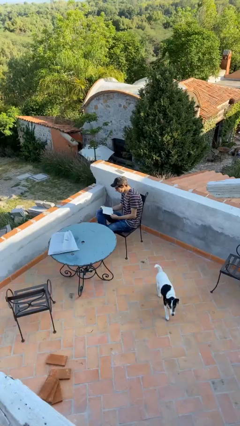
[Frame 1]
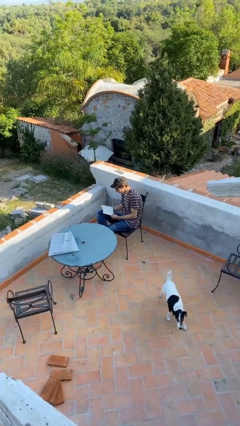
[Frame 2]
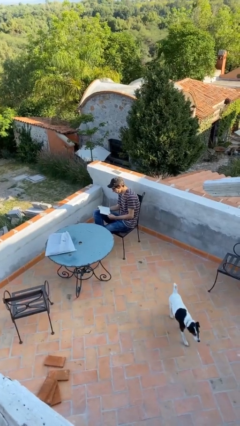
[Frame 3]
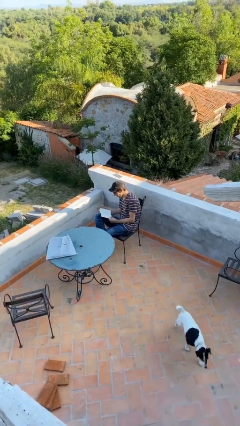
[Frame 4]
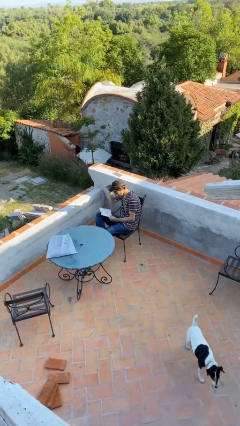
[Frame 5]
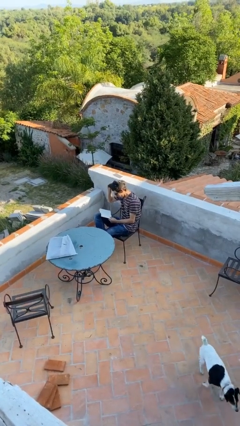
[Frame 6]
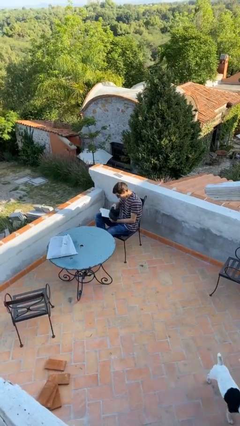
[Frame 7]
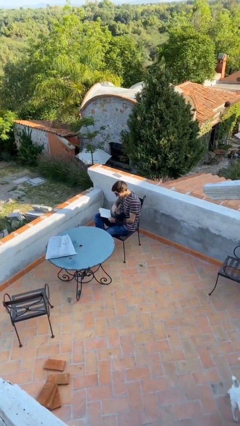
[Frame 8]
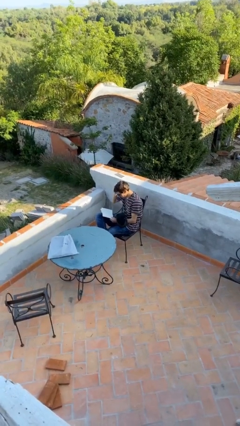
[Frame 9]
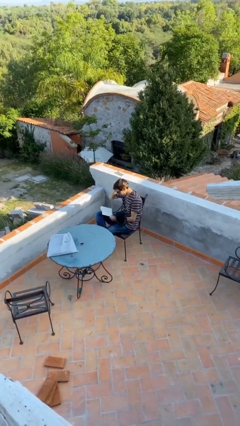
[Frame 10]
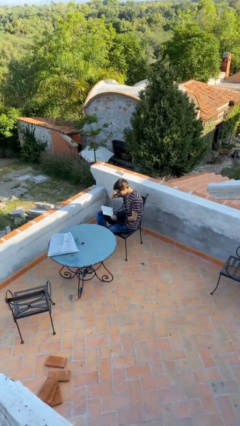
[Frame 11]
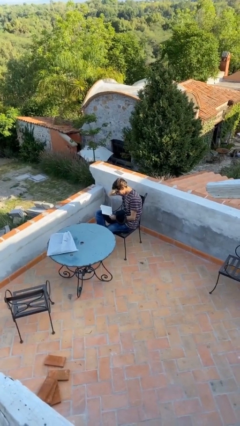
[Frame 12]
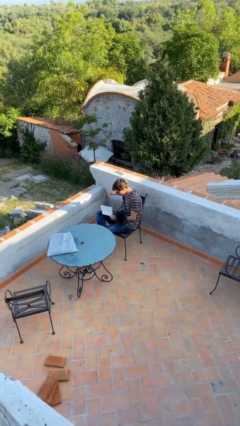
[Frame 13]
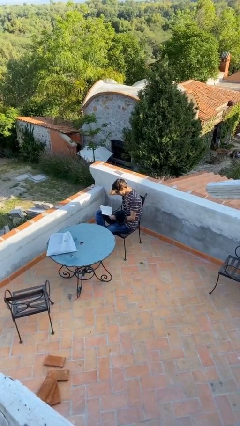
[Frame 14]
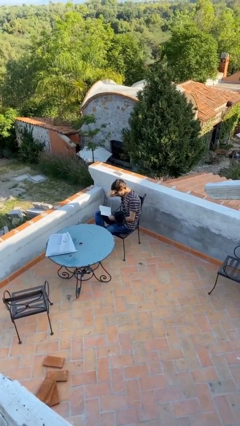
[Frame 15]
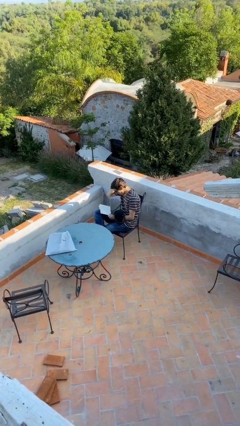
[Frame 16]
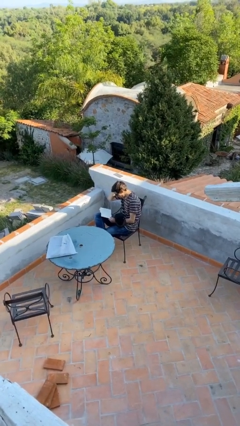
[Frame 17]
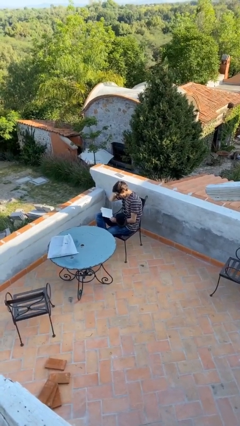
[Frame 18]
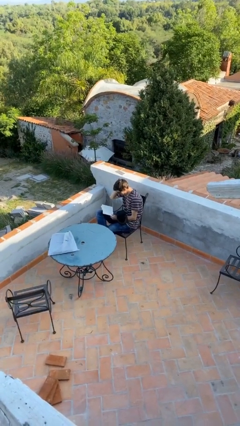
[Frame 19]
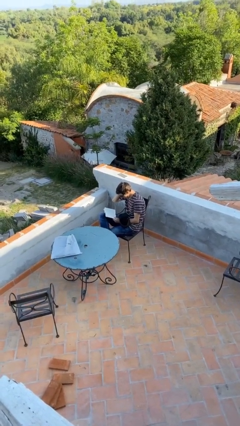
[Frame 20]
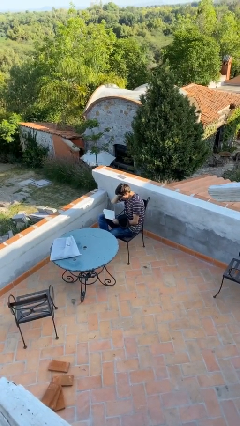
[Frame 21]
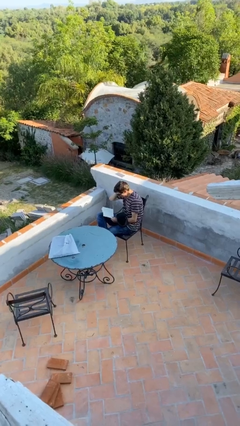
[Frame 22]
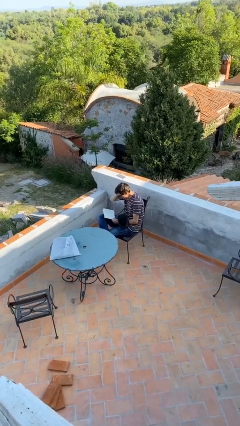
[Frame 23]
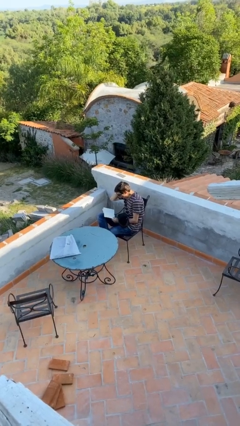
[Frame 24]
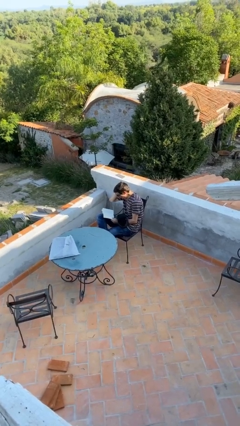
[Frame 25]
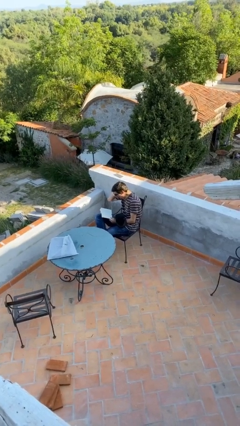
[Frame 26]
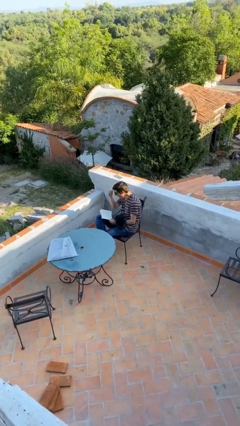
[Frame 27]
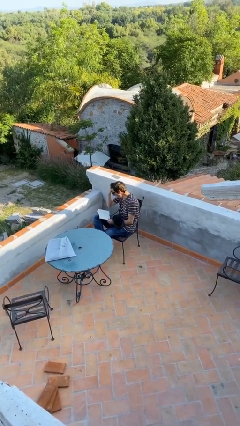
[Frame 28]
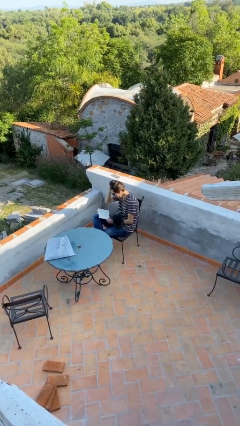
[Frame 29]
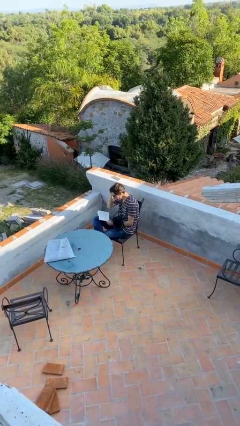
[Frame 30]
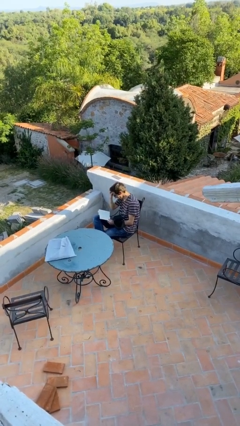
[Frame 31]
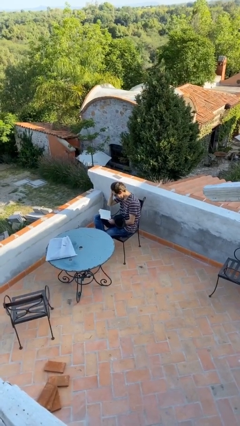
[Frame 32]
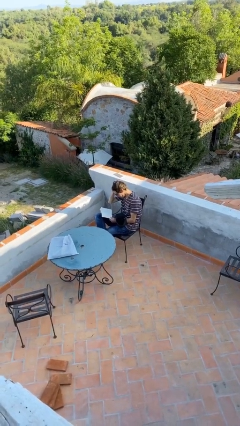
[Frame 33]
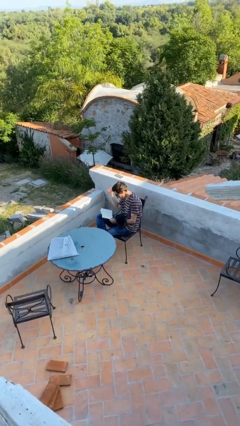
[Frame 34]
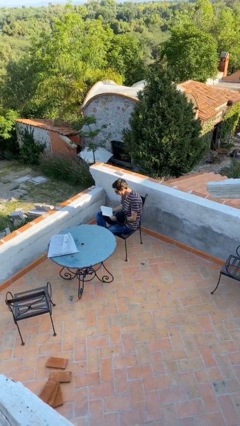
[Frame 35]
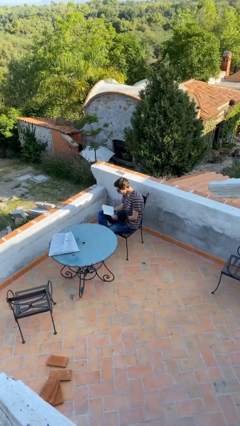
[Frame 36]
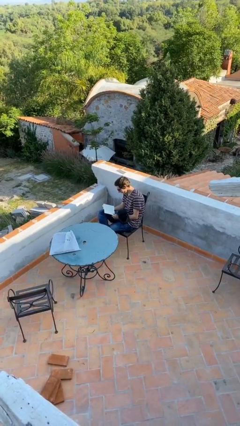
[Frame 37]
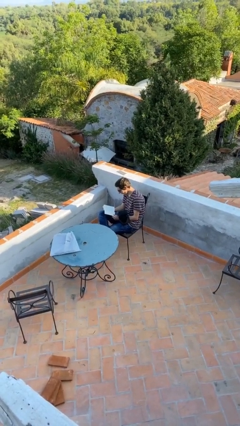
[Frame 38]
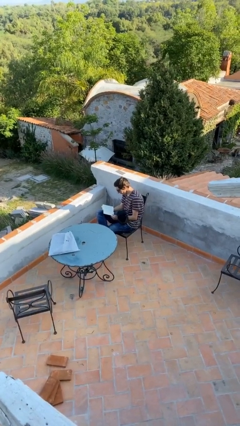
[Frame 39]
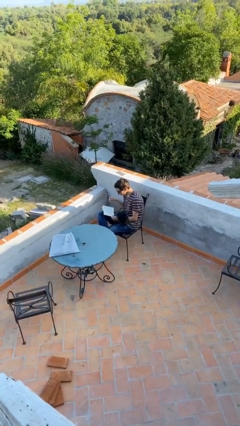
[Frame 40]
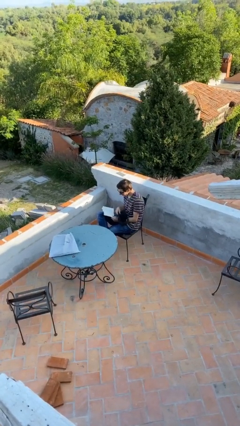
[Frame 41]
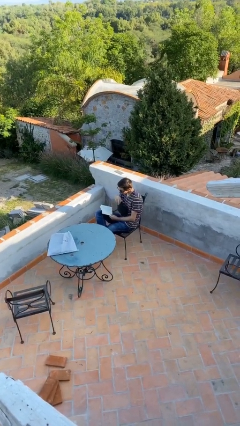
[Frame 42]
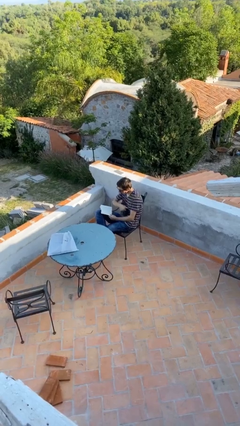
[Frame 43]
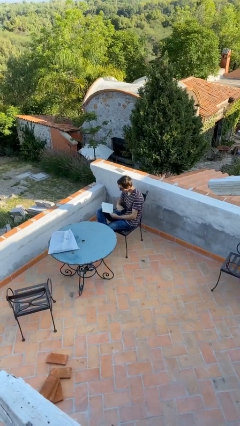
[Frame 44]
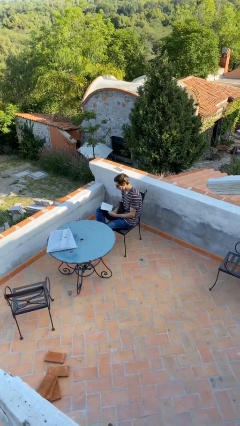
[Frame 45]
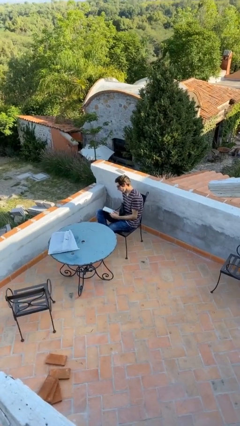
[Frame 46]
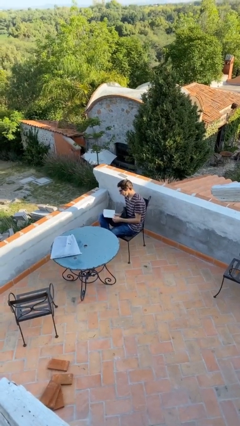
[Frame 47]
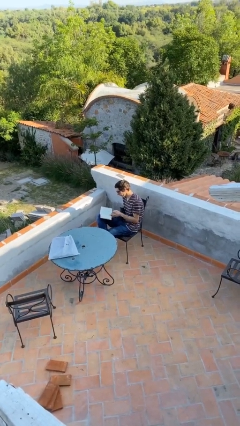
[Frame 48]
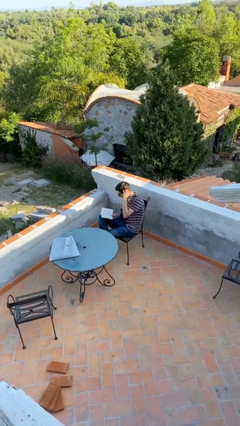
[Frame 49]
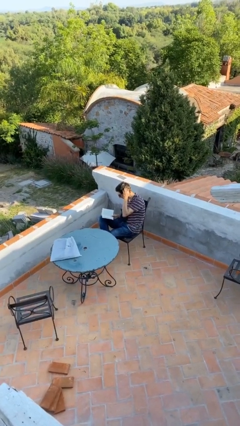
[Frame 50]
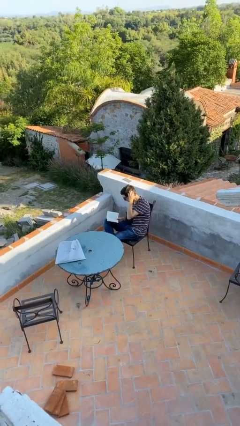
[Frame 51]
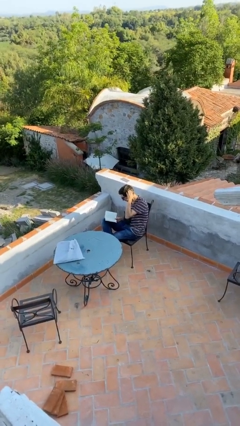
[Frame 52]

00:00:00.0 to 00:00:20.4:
person reads document

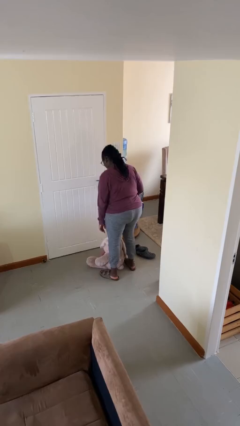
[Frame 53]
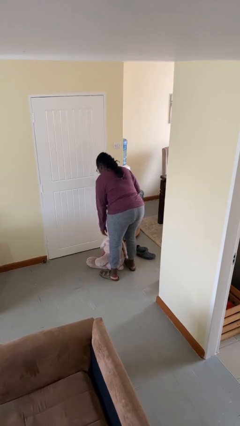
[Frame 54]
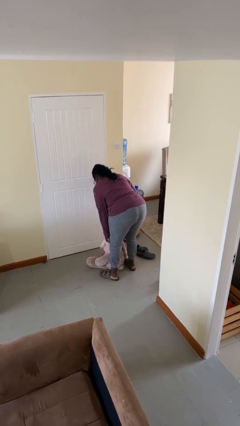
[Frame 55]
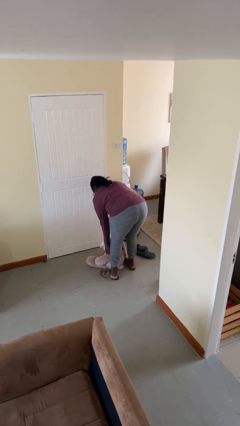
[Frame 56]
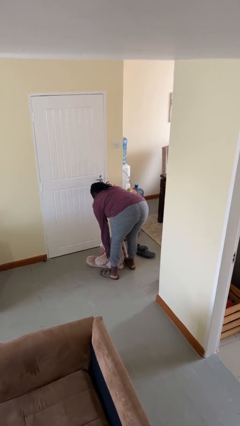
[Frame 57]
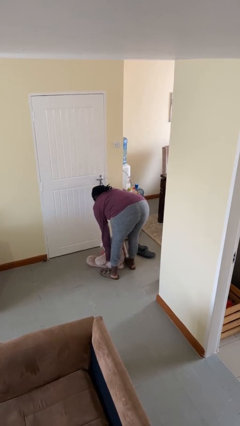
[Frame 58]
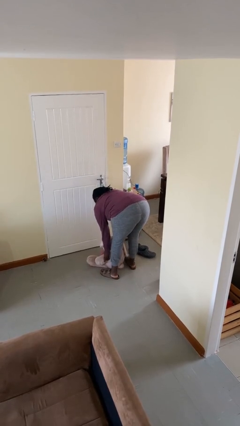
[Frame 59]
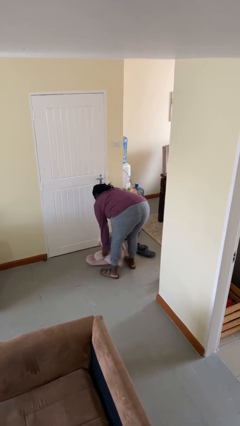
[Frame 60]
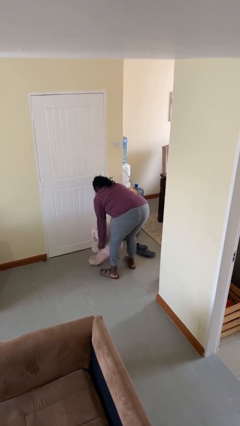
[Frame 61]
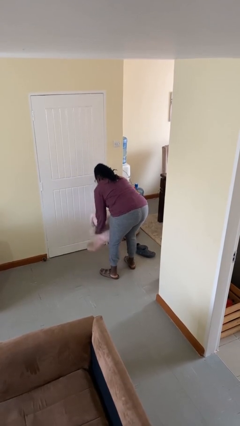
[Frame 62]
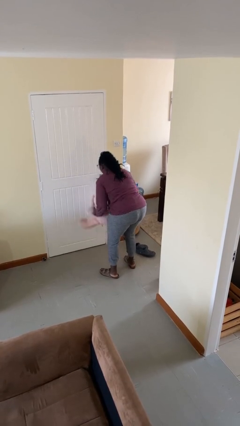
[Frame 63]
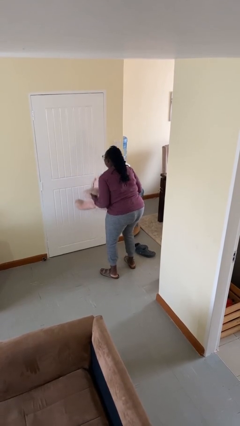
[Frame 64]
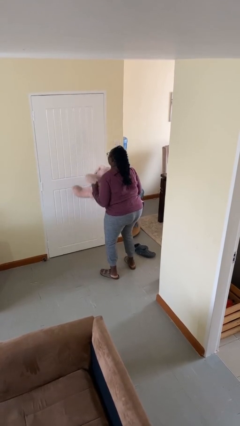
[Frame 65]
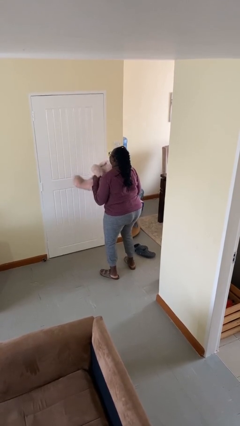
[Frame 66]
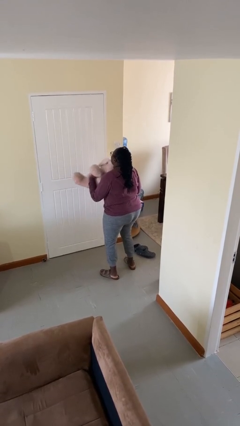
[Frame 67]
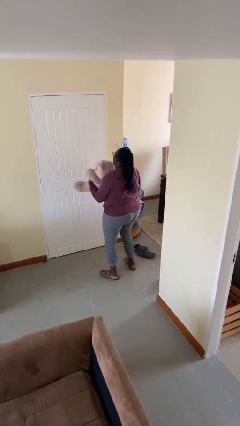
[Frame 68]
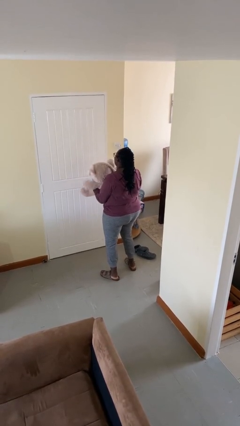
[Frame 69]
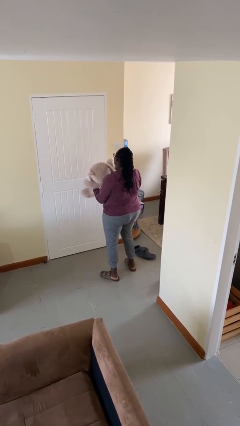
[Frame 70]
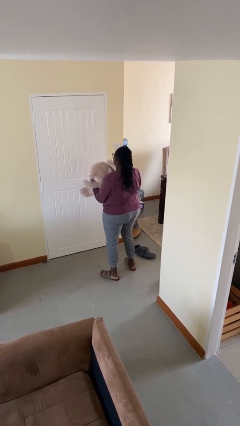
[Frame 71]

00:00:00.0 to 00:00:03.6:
person picks up object from floor

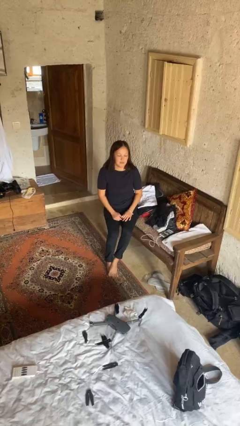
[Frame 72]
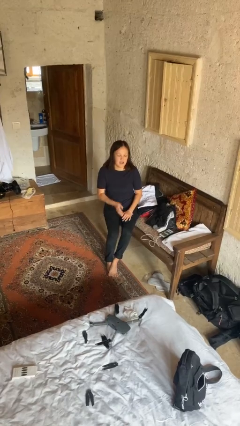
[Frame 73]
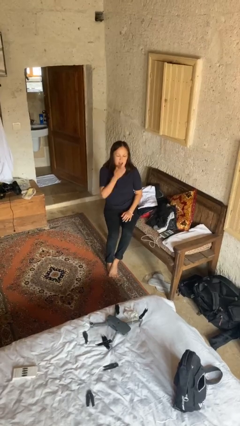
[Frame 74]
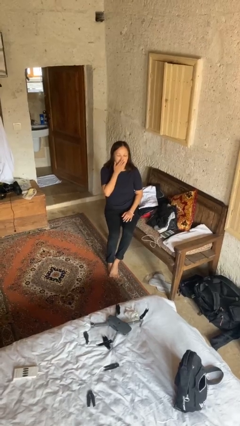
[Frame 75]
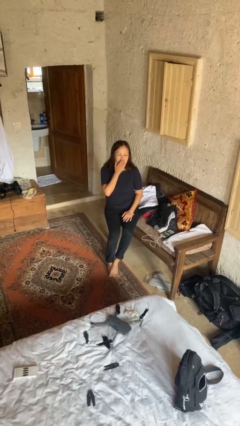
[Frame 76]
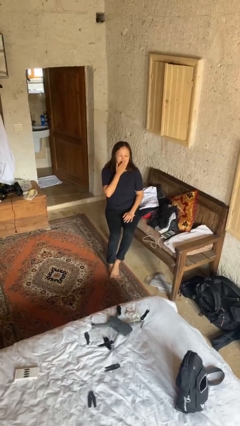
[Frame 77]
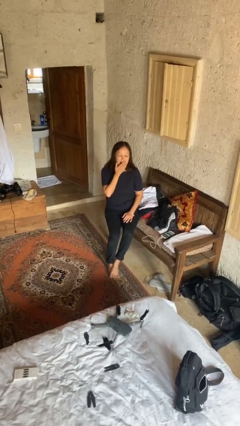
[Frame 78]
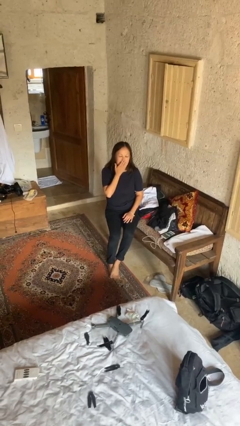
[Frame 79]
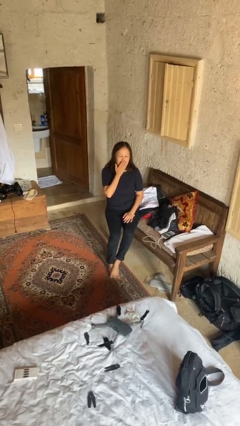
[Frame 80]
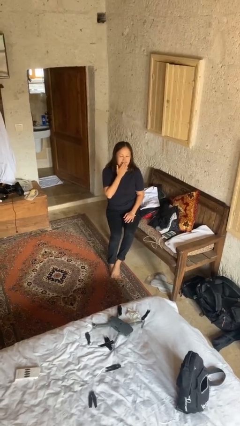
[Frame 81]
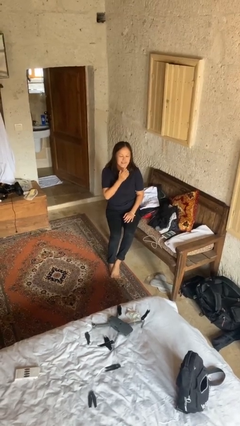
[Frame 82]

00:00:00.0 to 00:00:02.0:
person yawns

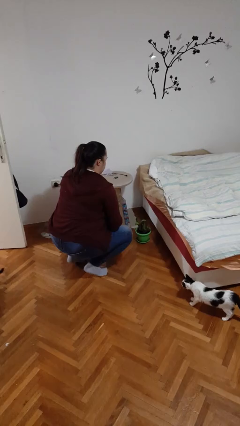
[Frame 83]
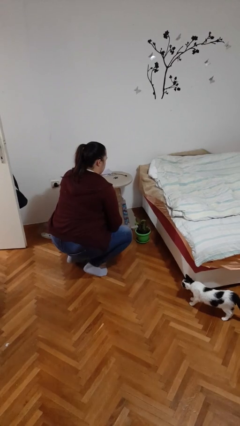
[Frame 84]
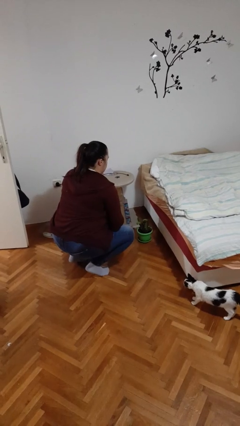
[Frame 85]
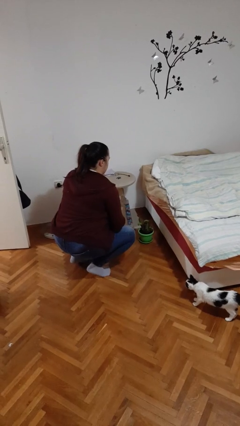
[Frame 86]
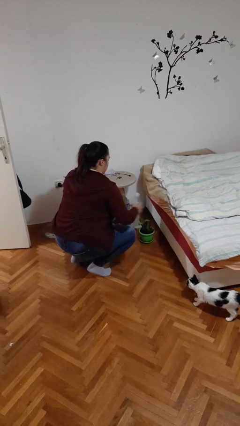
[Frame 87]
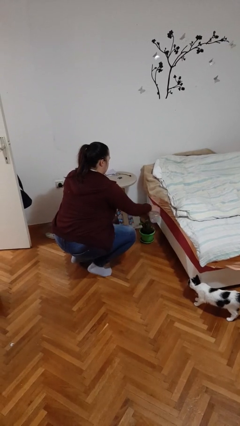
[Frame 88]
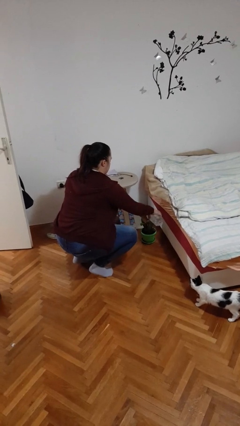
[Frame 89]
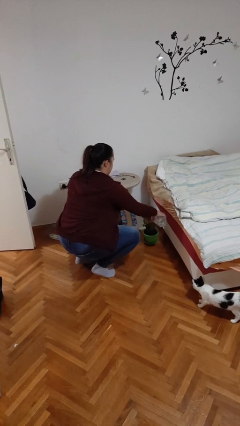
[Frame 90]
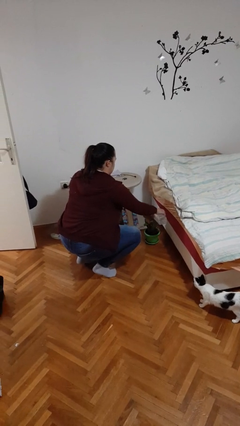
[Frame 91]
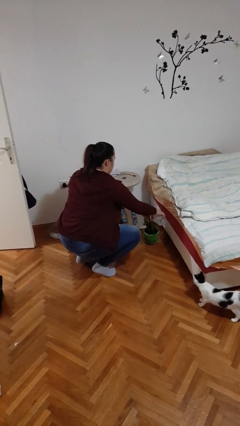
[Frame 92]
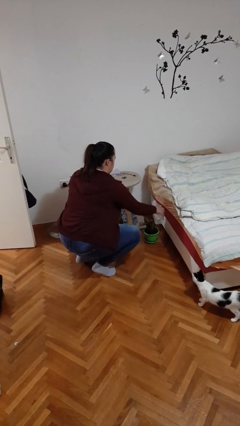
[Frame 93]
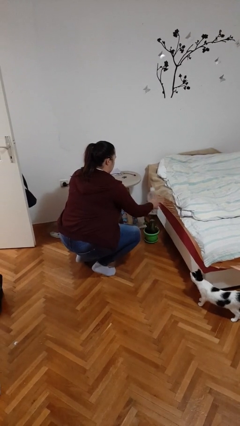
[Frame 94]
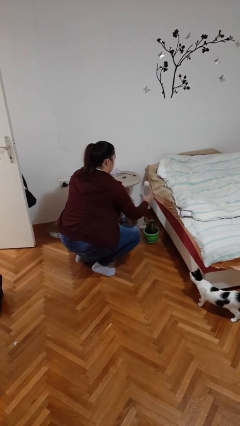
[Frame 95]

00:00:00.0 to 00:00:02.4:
person waters houseplant
